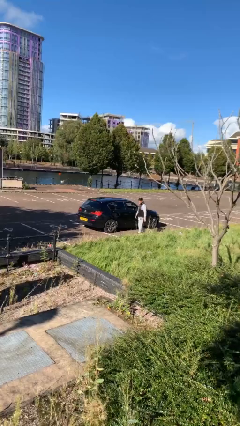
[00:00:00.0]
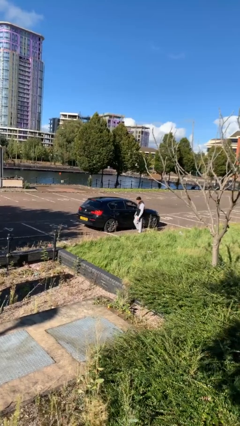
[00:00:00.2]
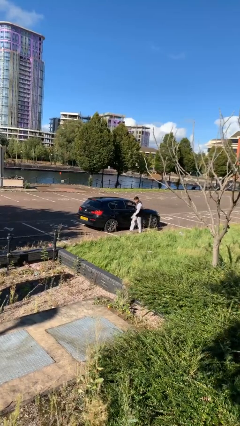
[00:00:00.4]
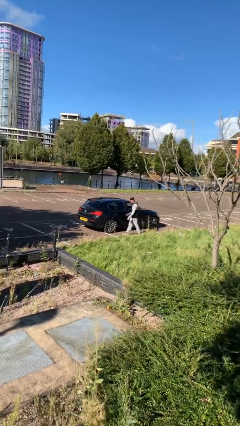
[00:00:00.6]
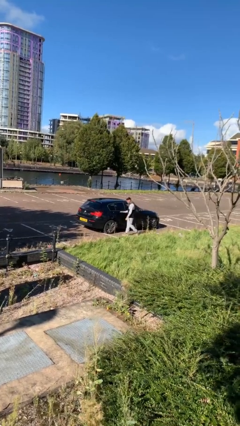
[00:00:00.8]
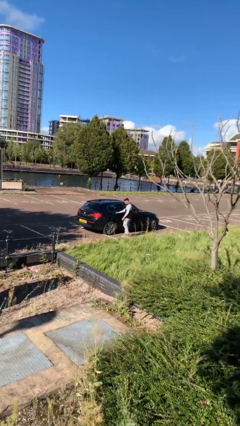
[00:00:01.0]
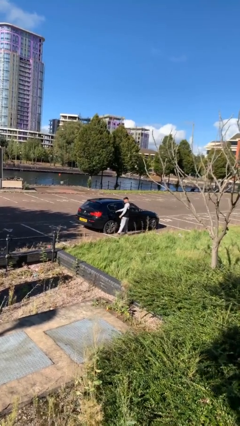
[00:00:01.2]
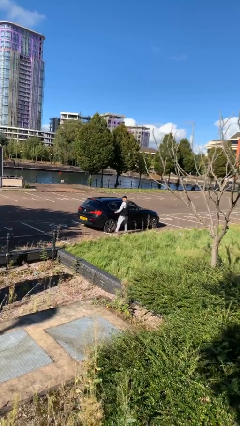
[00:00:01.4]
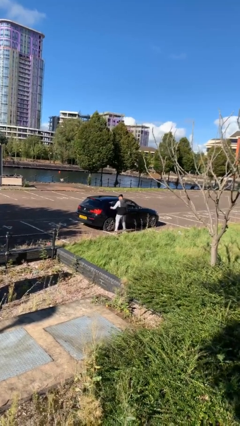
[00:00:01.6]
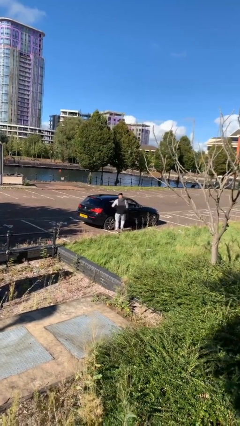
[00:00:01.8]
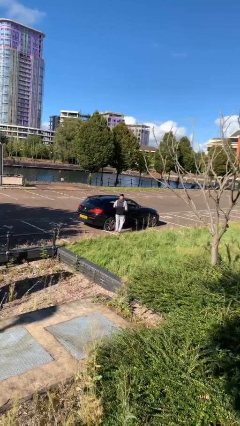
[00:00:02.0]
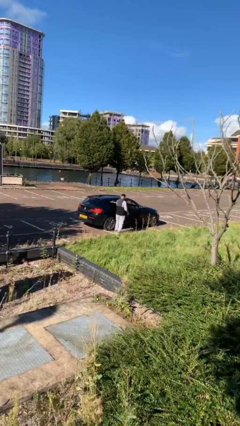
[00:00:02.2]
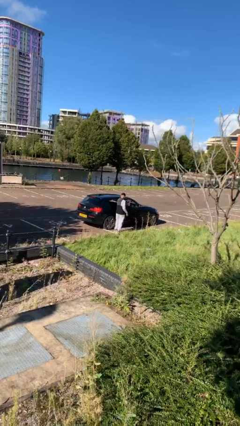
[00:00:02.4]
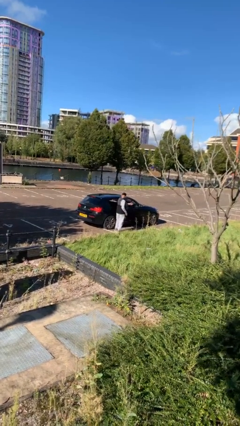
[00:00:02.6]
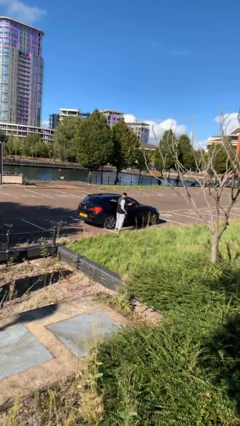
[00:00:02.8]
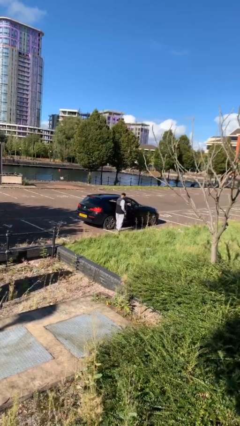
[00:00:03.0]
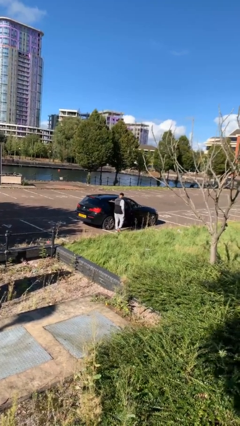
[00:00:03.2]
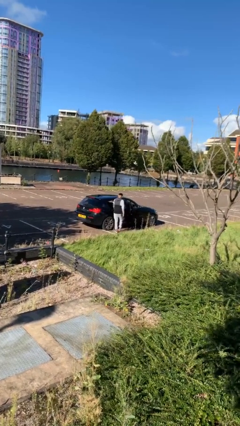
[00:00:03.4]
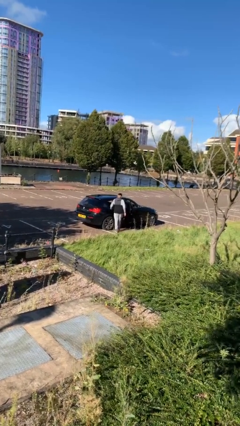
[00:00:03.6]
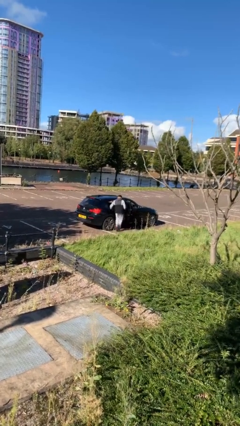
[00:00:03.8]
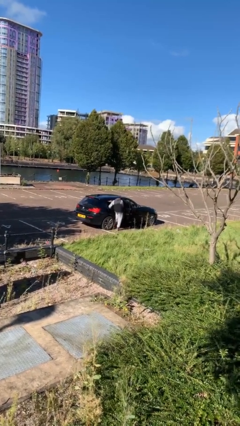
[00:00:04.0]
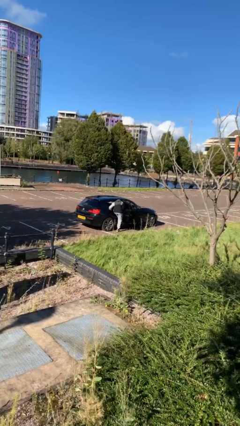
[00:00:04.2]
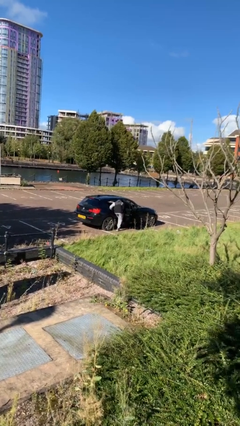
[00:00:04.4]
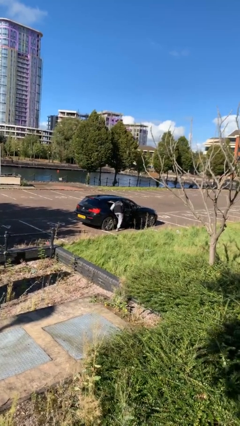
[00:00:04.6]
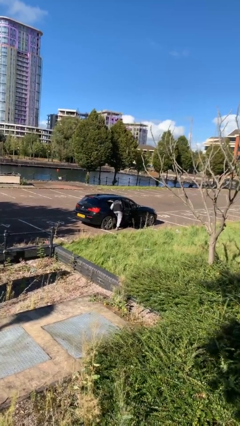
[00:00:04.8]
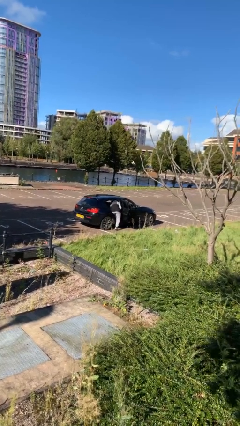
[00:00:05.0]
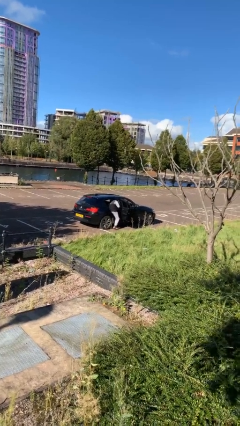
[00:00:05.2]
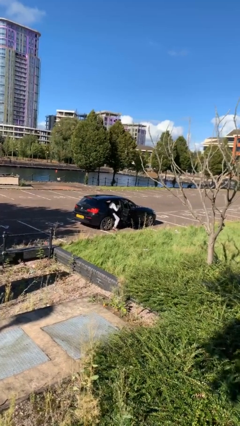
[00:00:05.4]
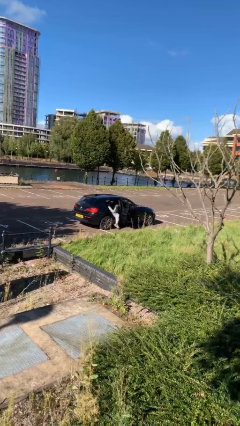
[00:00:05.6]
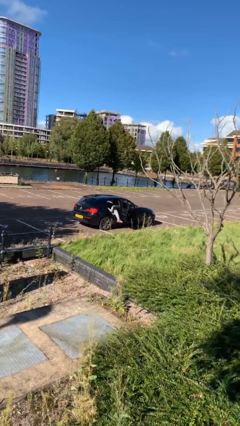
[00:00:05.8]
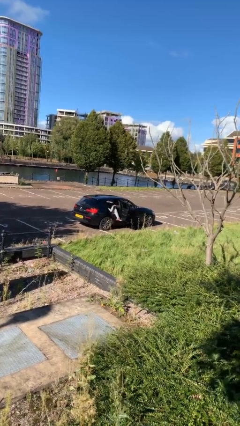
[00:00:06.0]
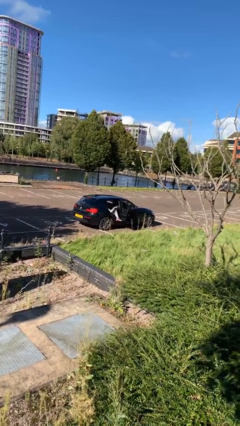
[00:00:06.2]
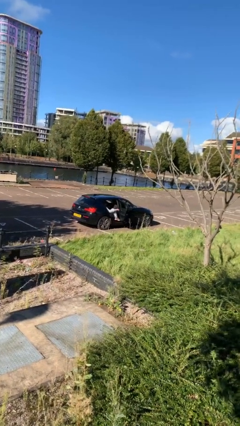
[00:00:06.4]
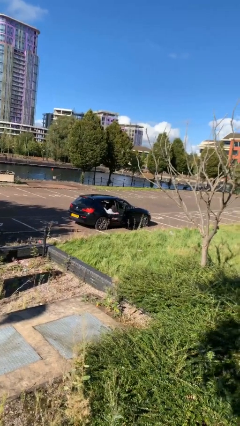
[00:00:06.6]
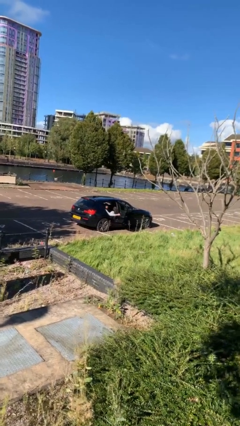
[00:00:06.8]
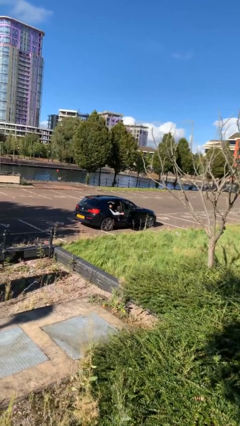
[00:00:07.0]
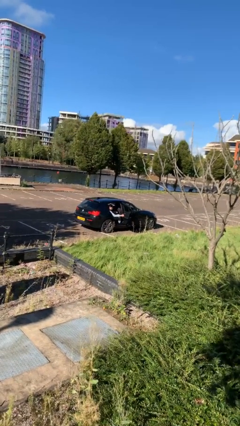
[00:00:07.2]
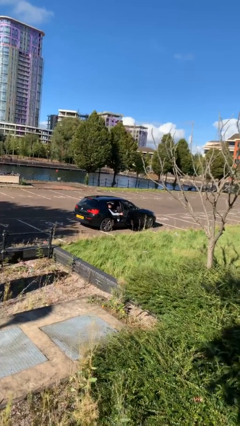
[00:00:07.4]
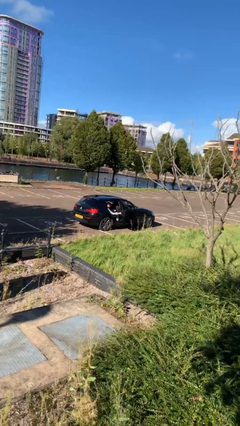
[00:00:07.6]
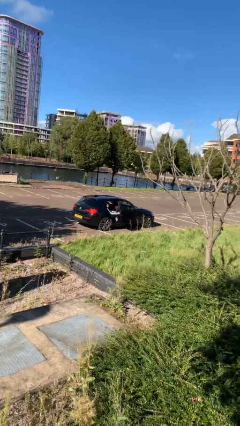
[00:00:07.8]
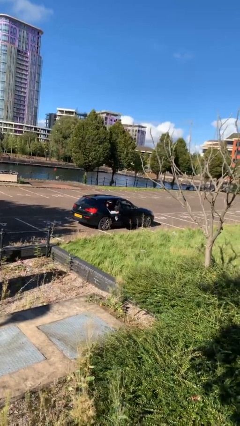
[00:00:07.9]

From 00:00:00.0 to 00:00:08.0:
car picks up person

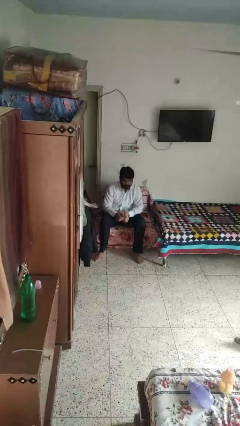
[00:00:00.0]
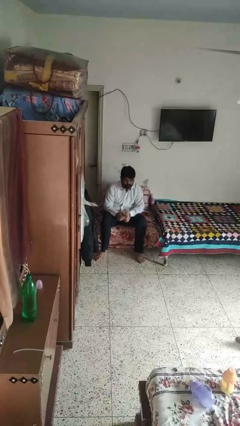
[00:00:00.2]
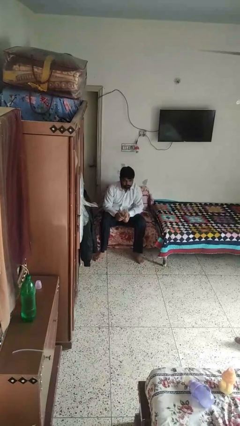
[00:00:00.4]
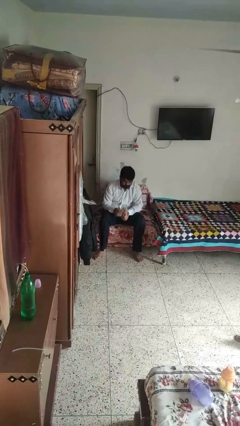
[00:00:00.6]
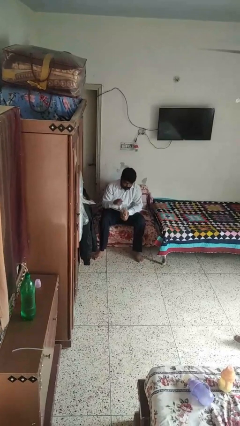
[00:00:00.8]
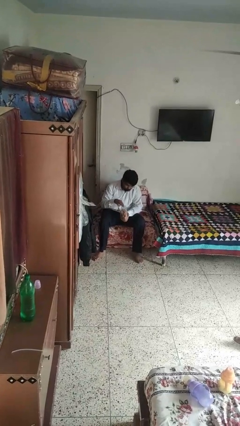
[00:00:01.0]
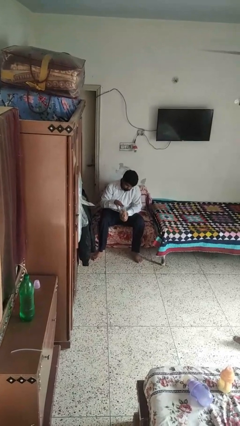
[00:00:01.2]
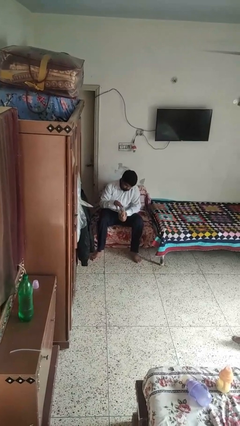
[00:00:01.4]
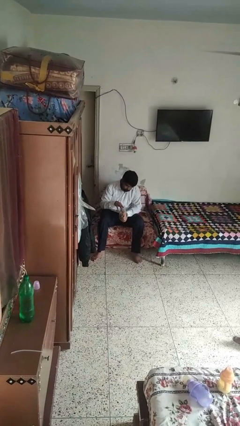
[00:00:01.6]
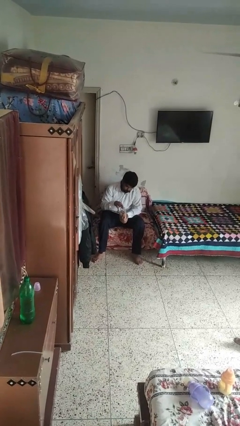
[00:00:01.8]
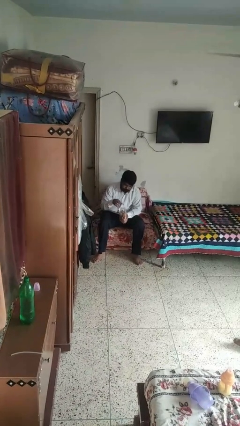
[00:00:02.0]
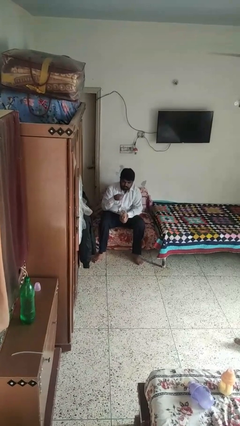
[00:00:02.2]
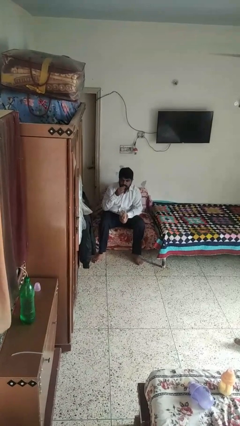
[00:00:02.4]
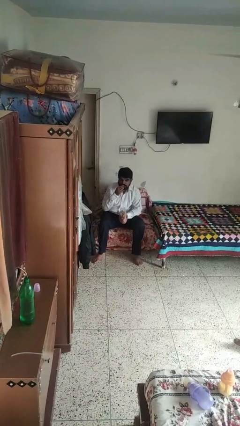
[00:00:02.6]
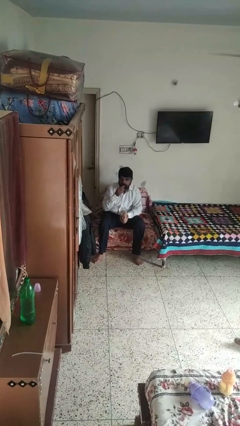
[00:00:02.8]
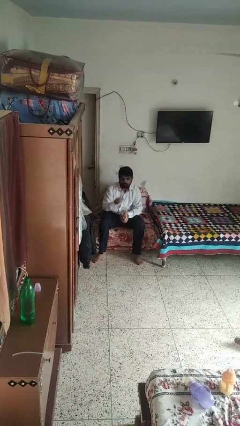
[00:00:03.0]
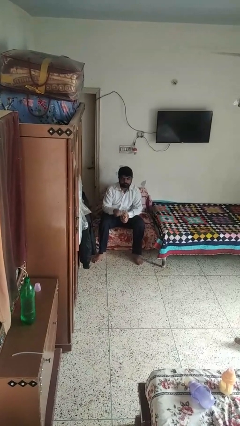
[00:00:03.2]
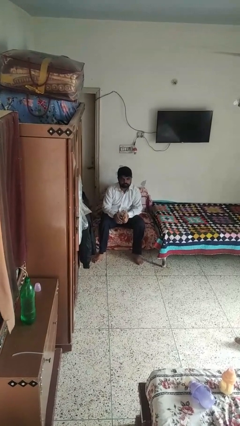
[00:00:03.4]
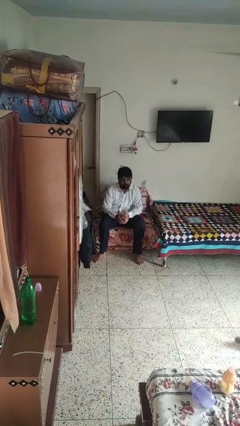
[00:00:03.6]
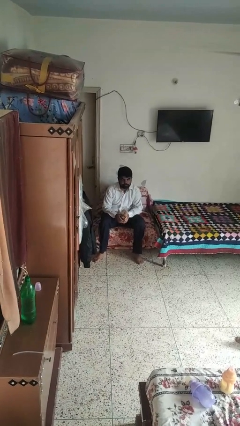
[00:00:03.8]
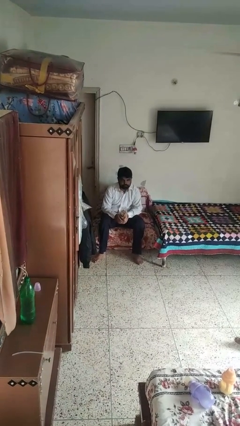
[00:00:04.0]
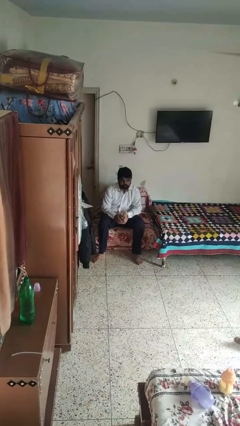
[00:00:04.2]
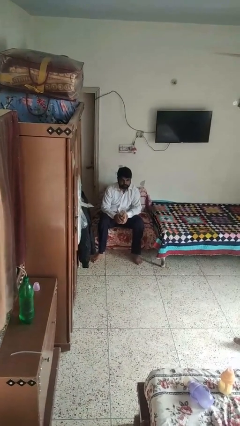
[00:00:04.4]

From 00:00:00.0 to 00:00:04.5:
person eats snack from bag

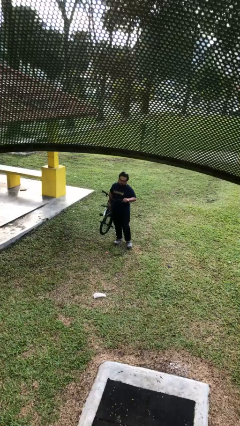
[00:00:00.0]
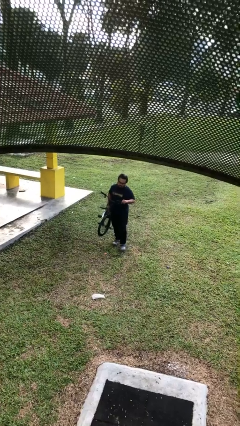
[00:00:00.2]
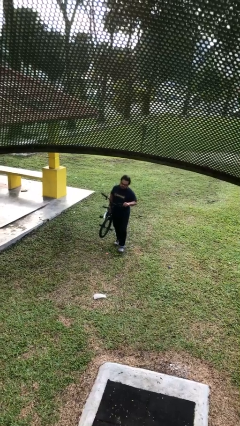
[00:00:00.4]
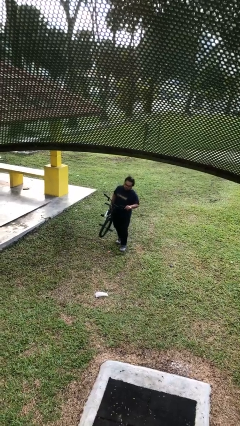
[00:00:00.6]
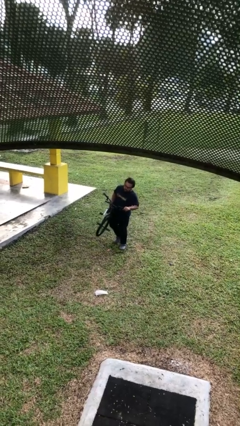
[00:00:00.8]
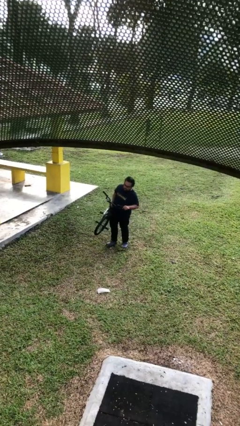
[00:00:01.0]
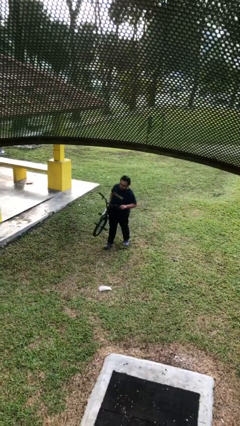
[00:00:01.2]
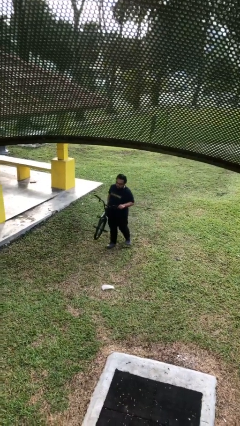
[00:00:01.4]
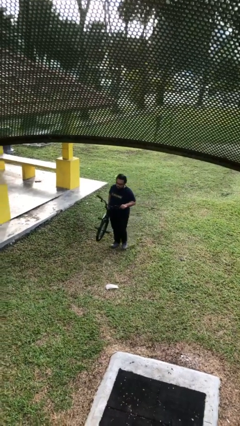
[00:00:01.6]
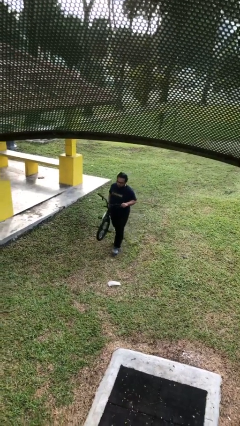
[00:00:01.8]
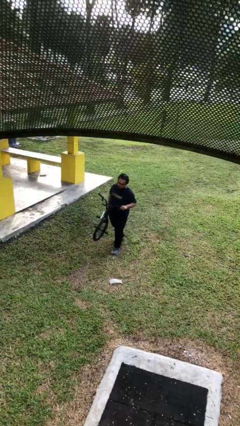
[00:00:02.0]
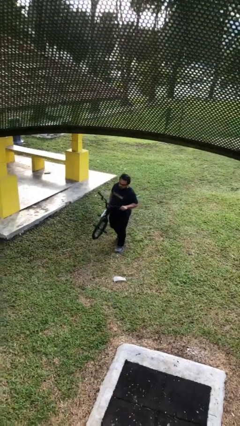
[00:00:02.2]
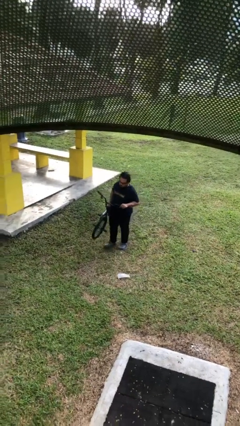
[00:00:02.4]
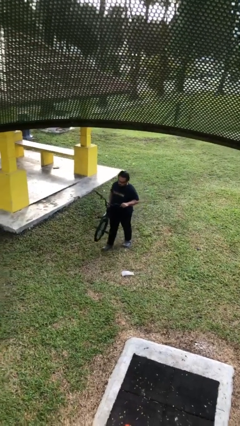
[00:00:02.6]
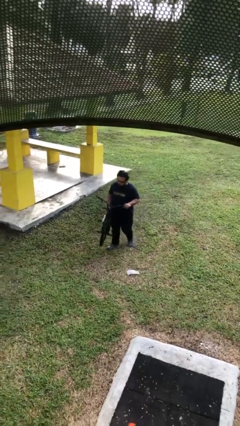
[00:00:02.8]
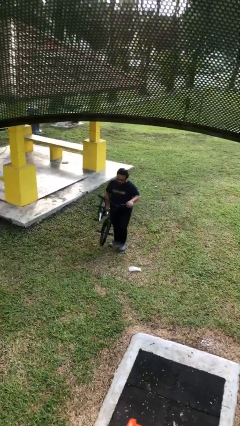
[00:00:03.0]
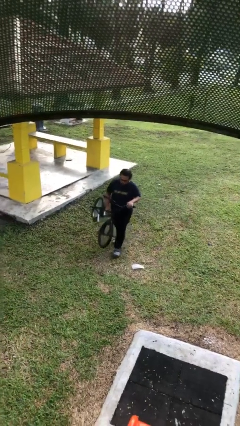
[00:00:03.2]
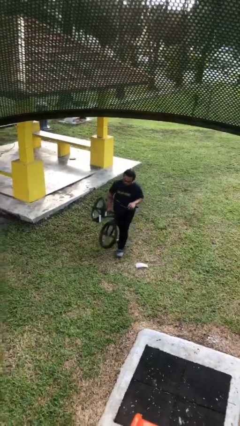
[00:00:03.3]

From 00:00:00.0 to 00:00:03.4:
person carries heavy object

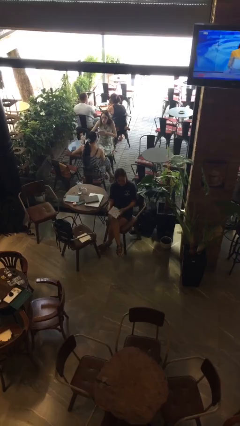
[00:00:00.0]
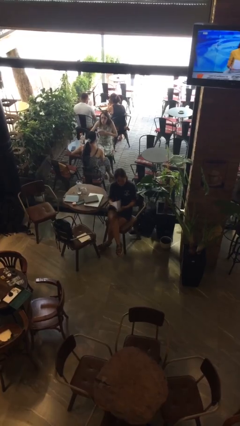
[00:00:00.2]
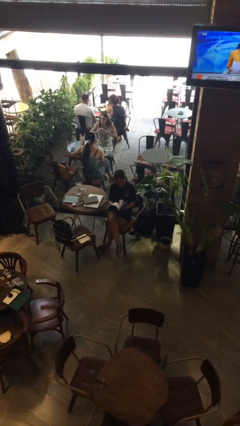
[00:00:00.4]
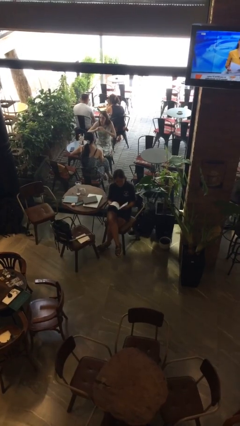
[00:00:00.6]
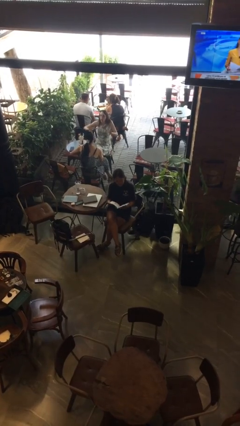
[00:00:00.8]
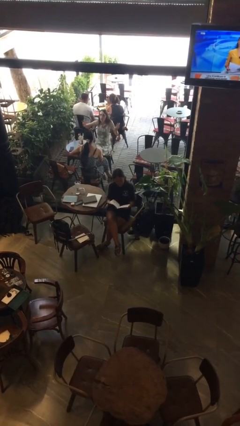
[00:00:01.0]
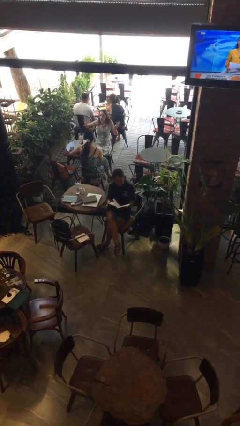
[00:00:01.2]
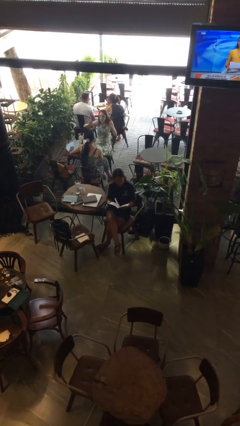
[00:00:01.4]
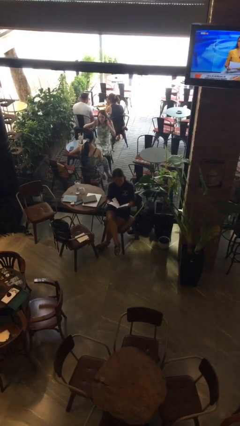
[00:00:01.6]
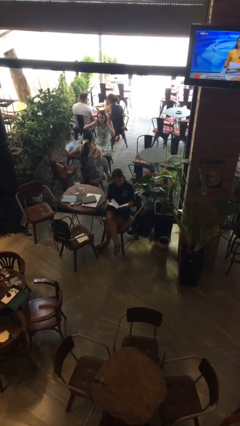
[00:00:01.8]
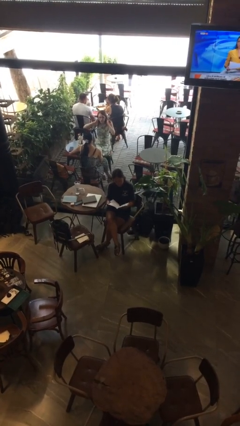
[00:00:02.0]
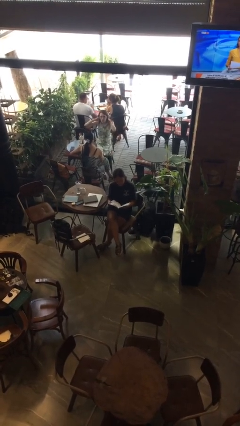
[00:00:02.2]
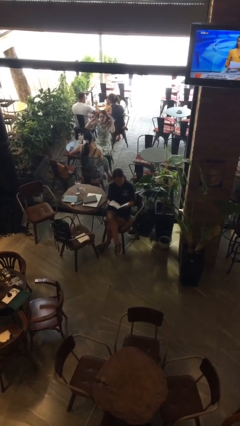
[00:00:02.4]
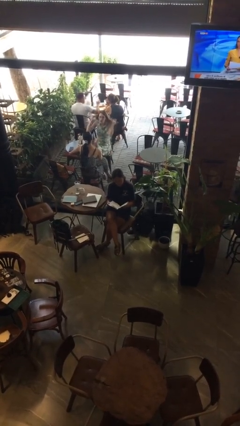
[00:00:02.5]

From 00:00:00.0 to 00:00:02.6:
person reads magazine
